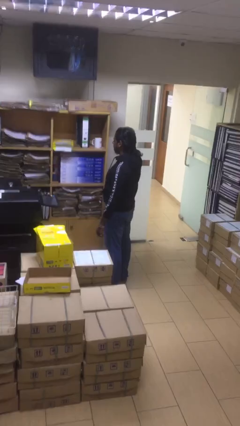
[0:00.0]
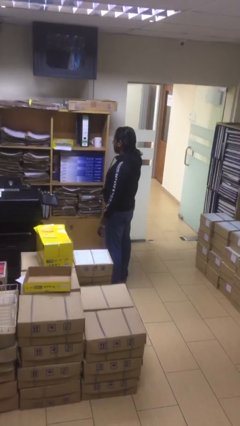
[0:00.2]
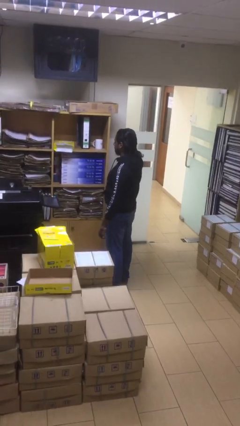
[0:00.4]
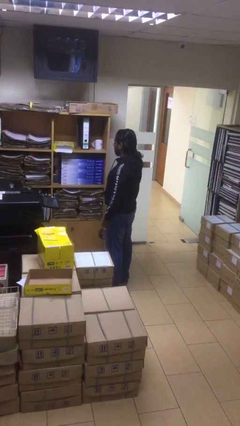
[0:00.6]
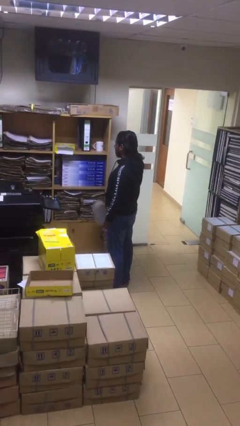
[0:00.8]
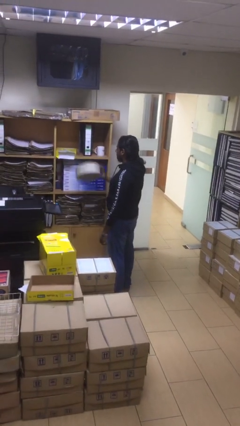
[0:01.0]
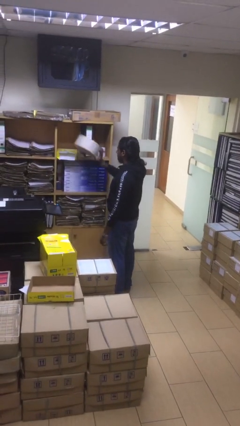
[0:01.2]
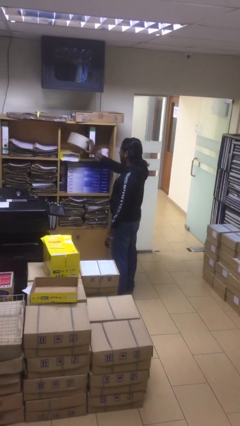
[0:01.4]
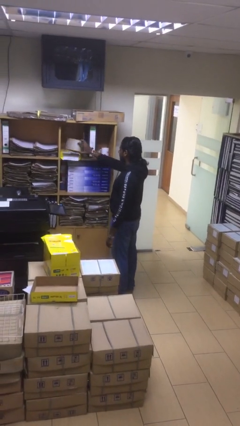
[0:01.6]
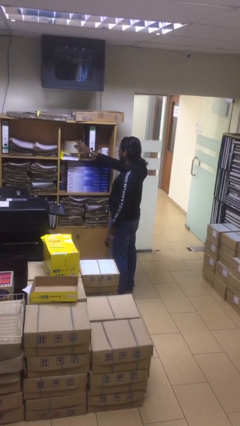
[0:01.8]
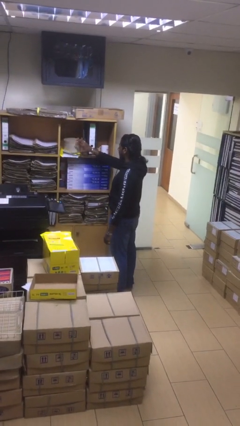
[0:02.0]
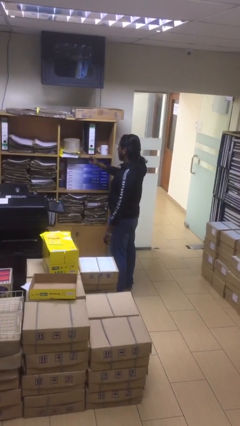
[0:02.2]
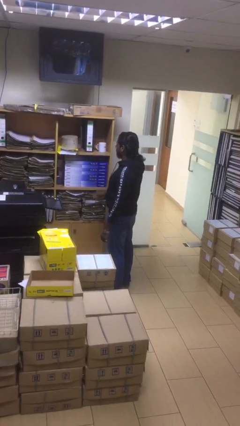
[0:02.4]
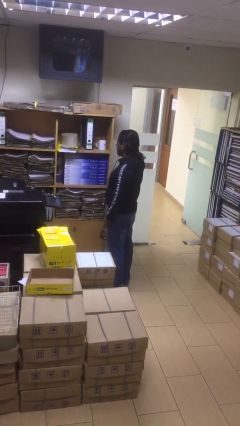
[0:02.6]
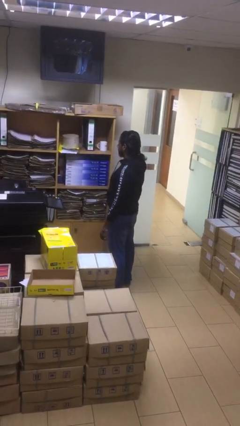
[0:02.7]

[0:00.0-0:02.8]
person puts down object into cabinet

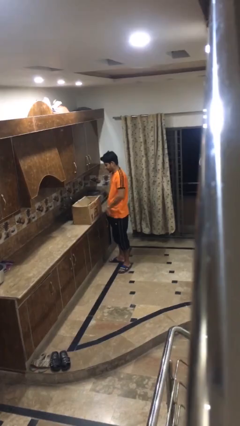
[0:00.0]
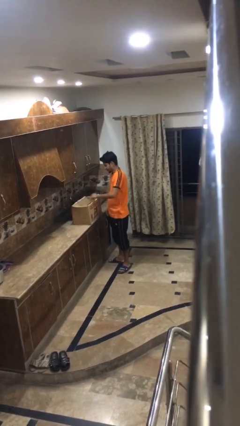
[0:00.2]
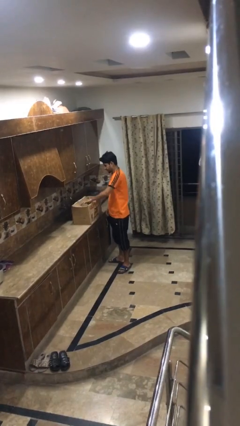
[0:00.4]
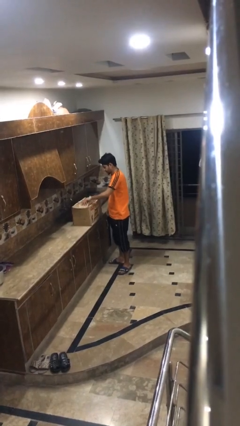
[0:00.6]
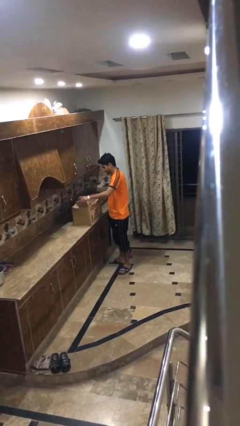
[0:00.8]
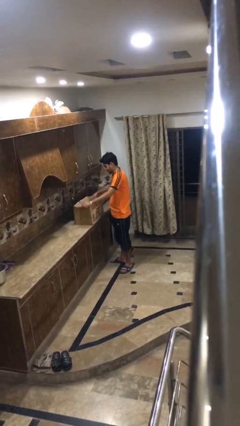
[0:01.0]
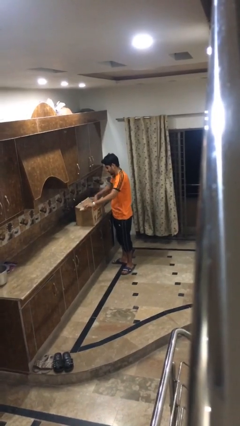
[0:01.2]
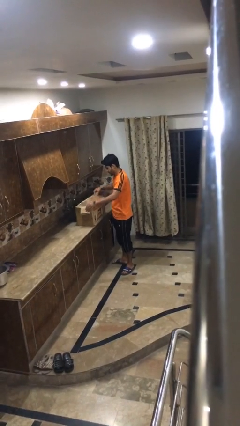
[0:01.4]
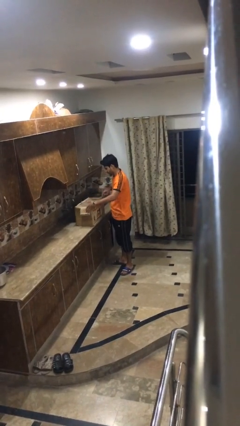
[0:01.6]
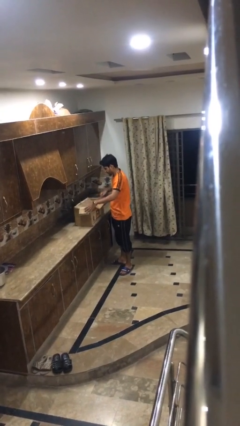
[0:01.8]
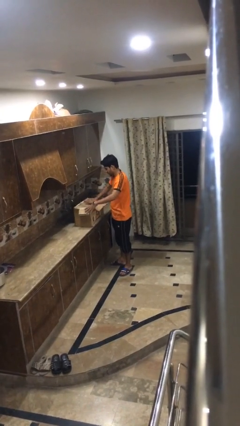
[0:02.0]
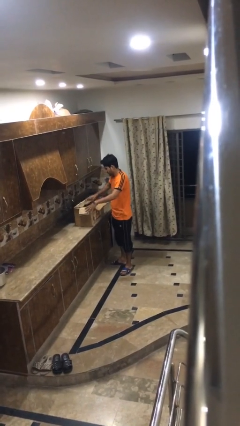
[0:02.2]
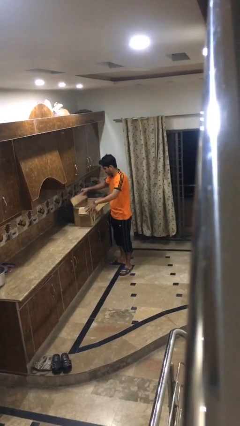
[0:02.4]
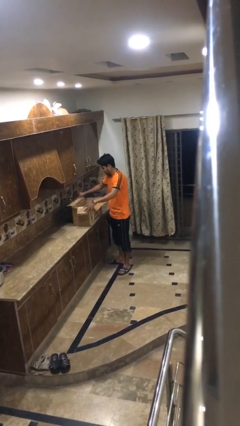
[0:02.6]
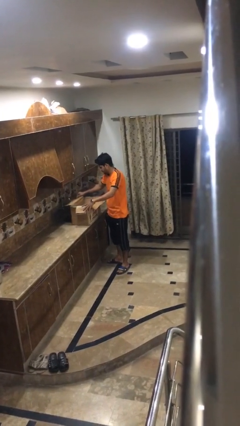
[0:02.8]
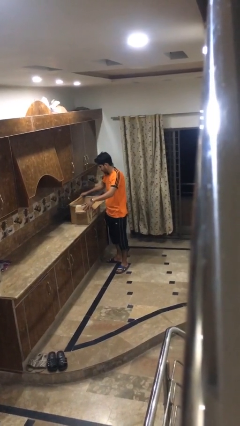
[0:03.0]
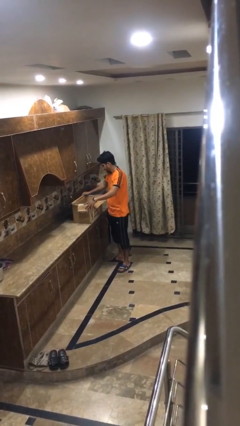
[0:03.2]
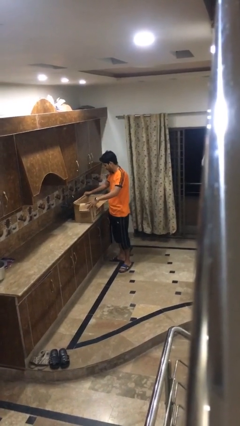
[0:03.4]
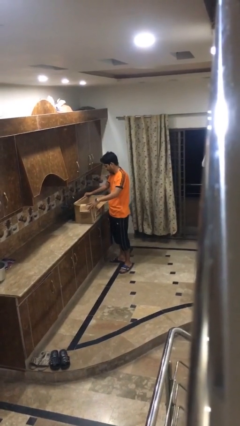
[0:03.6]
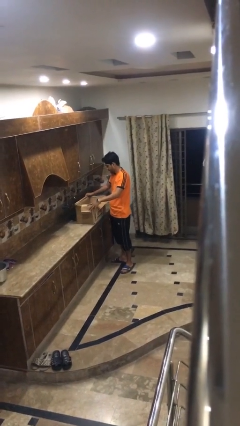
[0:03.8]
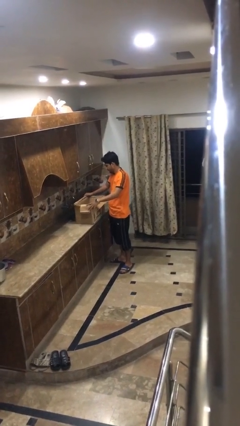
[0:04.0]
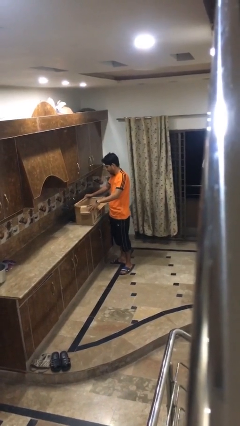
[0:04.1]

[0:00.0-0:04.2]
person opens box

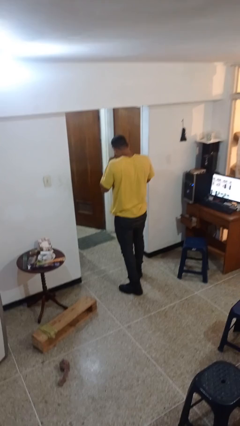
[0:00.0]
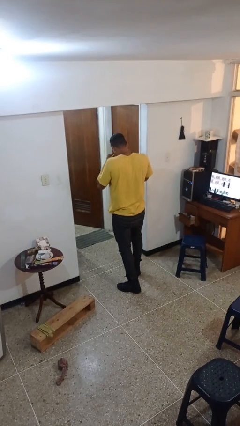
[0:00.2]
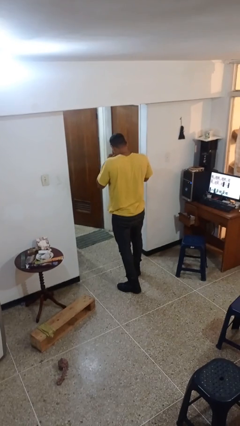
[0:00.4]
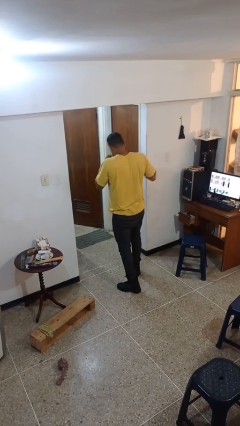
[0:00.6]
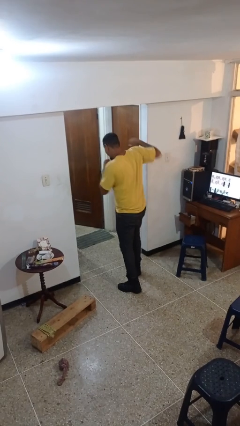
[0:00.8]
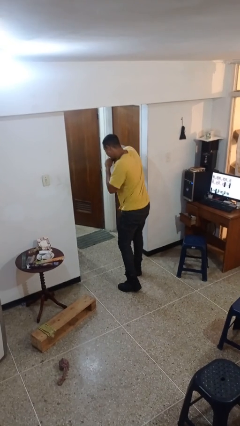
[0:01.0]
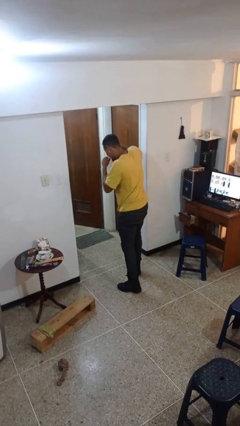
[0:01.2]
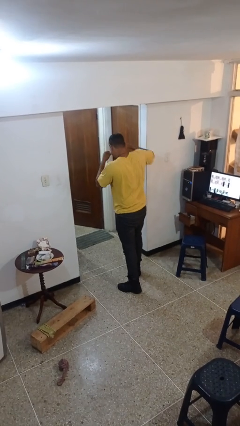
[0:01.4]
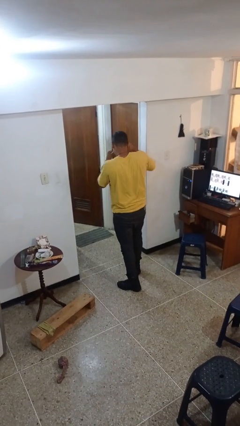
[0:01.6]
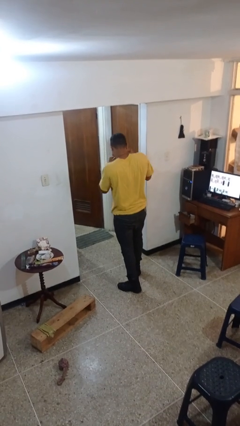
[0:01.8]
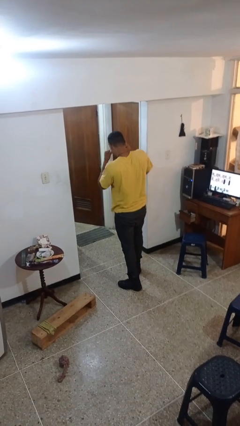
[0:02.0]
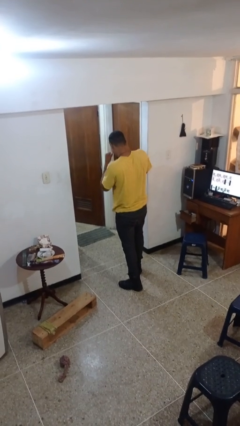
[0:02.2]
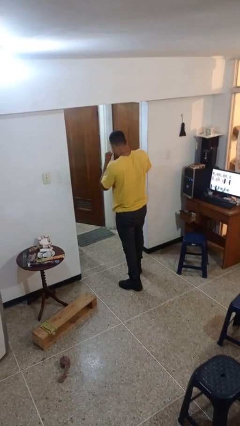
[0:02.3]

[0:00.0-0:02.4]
person punches

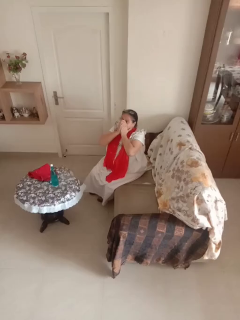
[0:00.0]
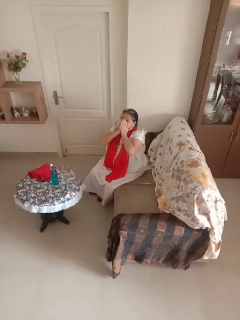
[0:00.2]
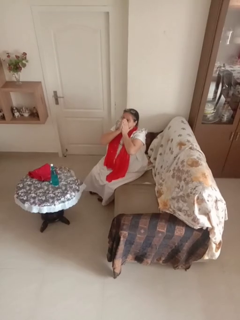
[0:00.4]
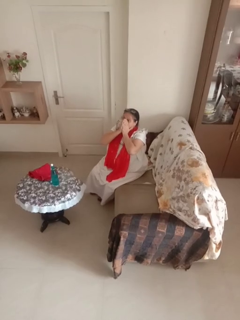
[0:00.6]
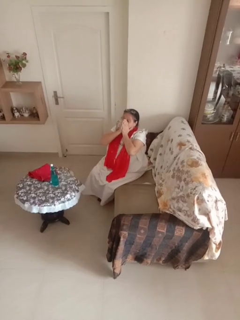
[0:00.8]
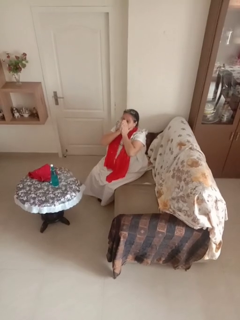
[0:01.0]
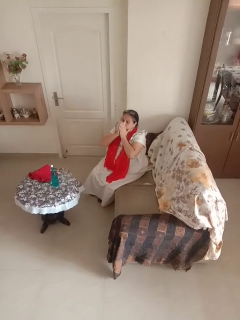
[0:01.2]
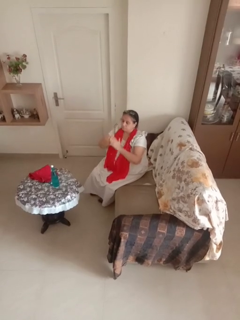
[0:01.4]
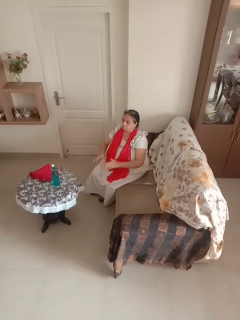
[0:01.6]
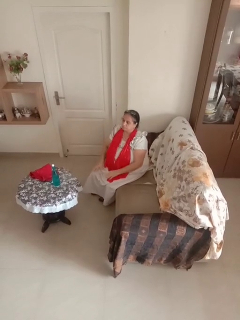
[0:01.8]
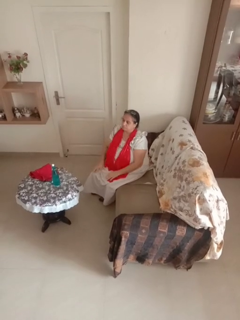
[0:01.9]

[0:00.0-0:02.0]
person covers face with hands

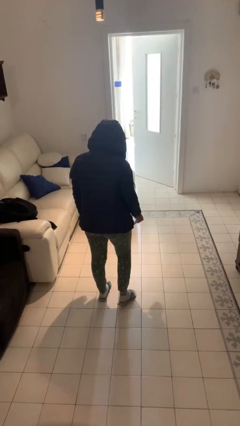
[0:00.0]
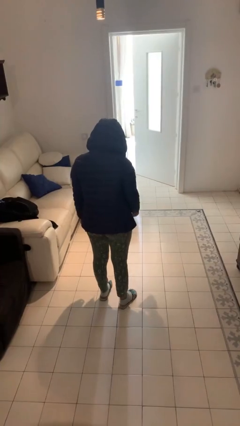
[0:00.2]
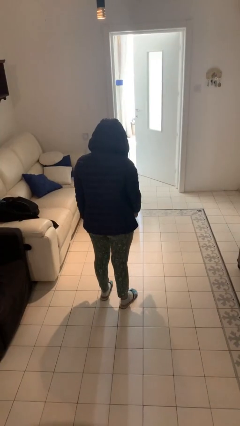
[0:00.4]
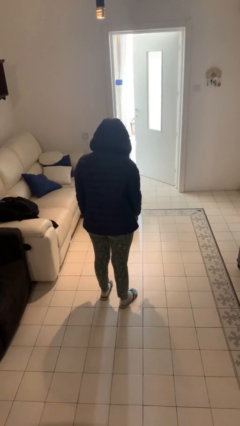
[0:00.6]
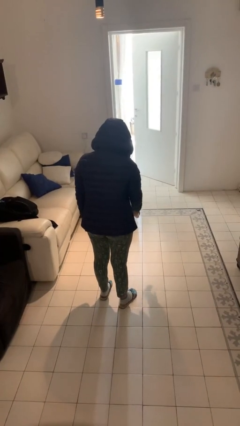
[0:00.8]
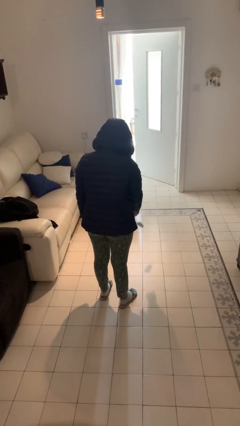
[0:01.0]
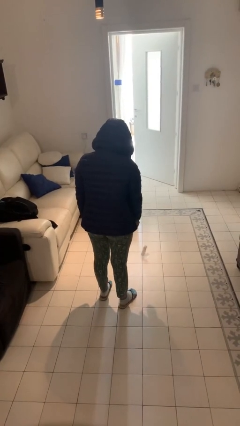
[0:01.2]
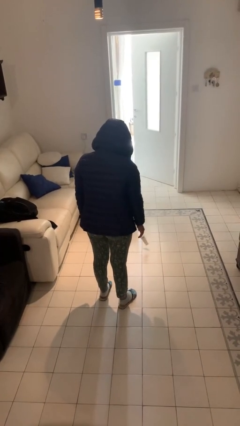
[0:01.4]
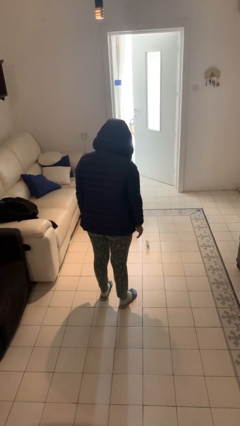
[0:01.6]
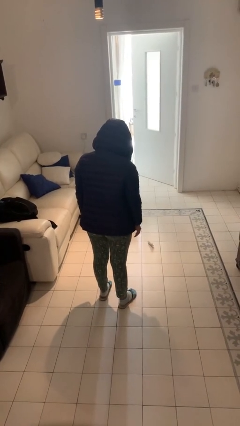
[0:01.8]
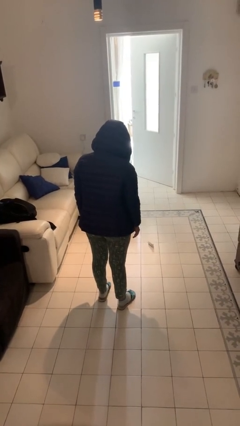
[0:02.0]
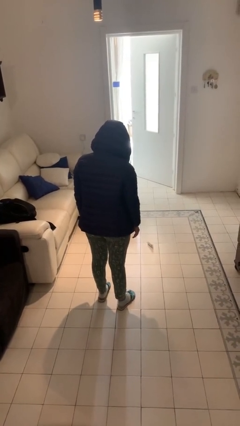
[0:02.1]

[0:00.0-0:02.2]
person throws object to ground

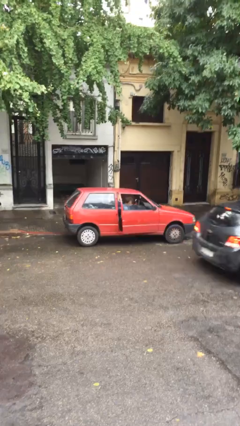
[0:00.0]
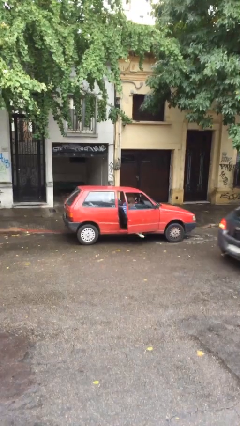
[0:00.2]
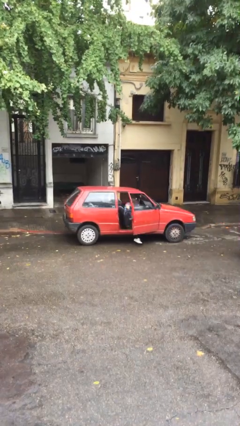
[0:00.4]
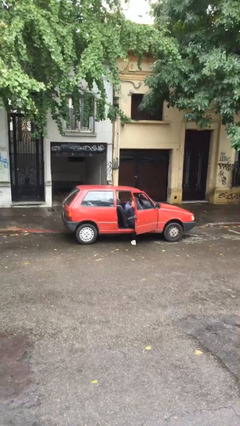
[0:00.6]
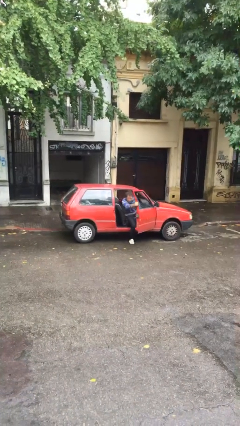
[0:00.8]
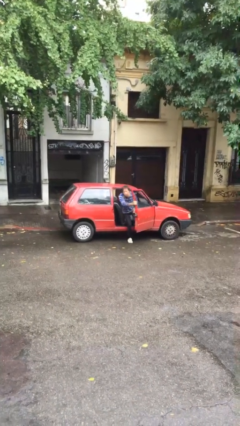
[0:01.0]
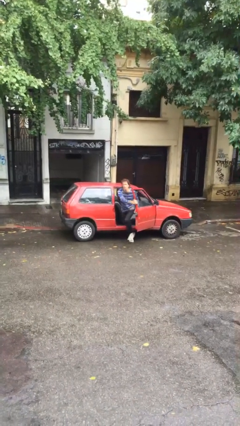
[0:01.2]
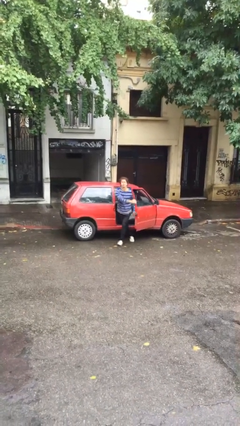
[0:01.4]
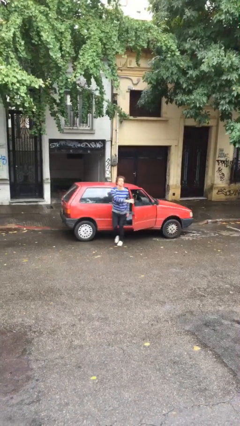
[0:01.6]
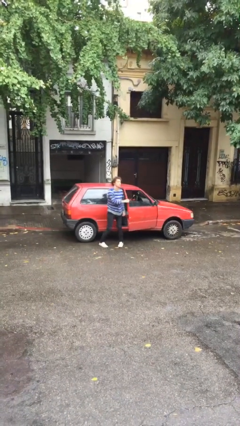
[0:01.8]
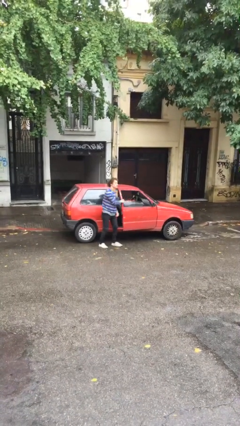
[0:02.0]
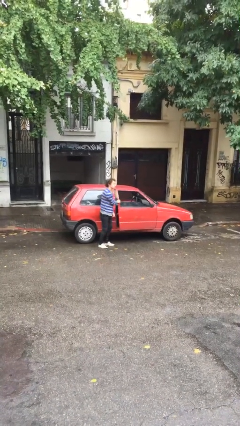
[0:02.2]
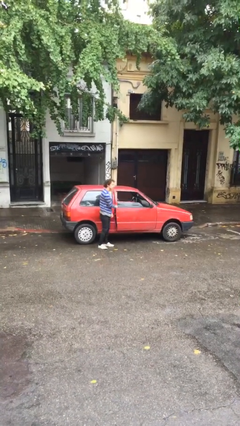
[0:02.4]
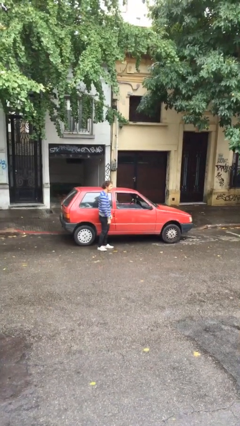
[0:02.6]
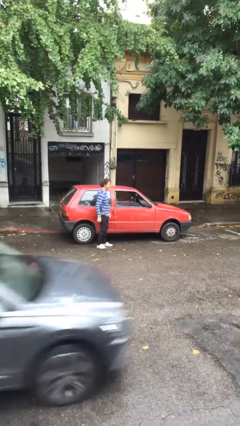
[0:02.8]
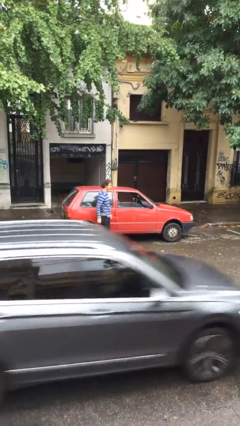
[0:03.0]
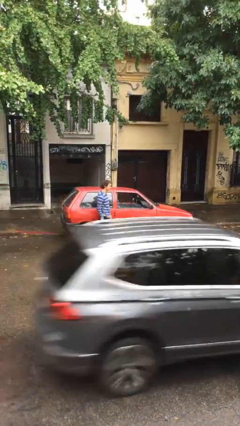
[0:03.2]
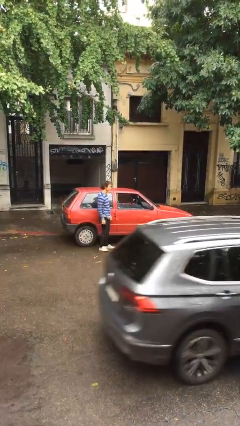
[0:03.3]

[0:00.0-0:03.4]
car drops off person

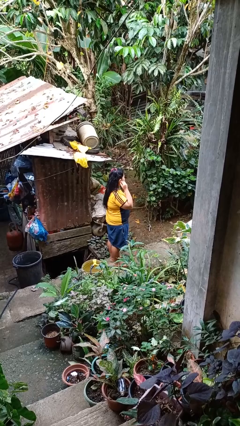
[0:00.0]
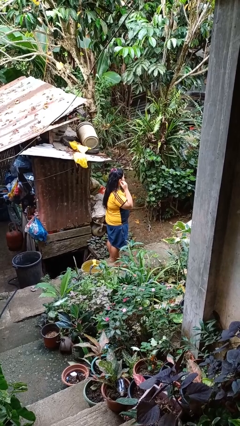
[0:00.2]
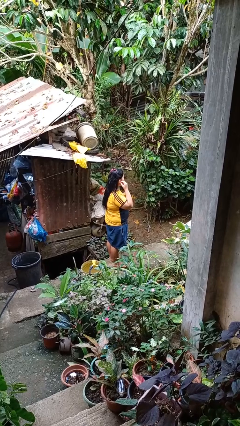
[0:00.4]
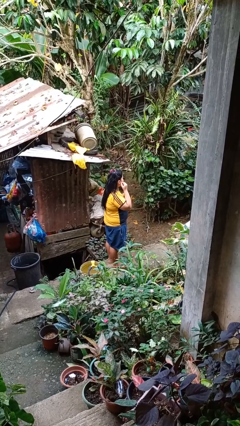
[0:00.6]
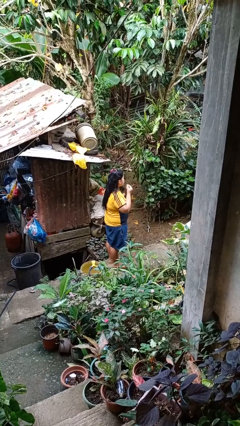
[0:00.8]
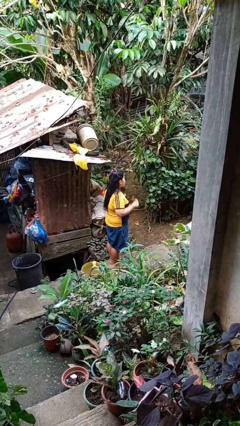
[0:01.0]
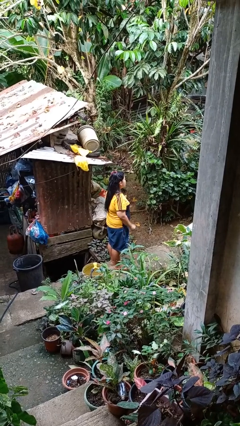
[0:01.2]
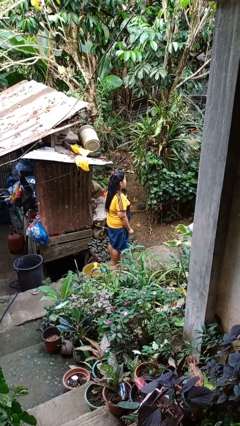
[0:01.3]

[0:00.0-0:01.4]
person takes off earrings
